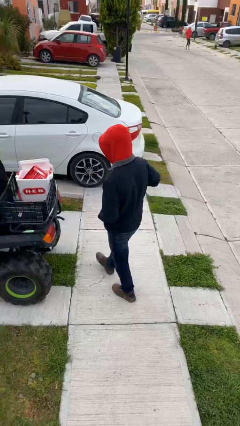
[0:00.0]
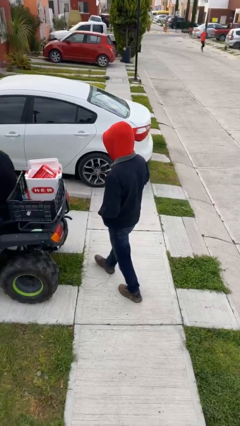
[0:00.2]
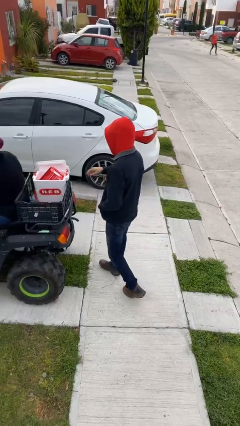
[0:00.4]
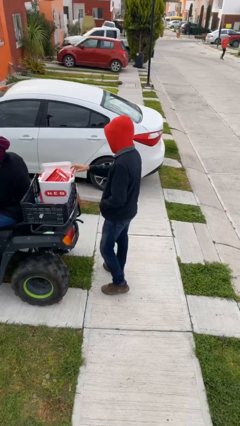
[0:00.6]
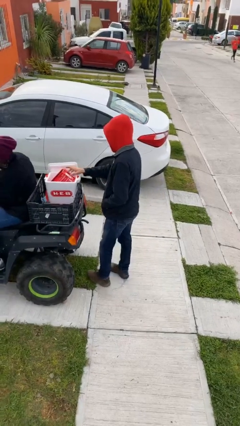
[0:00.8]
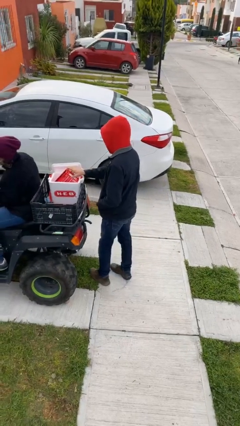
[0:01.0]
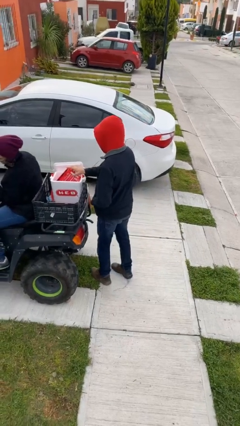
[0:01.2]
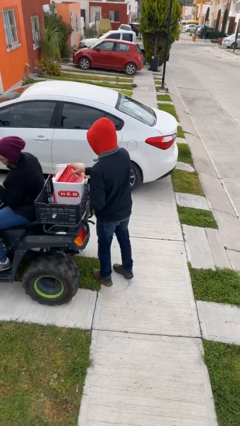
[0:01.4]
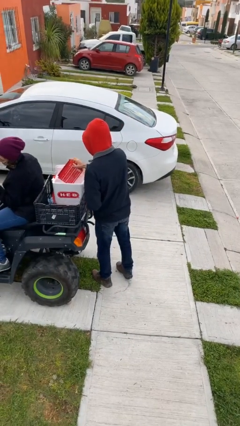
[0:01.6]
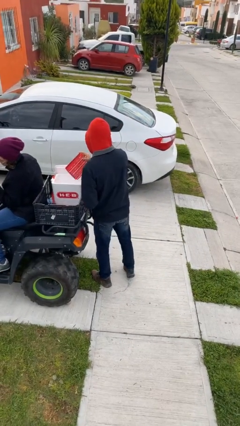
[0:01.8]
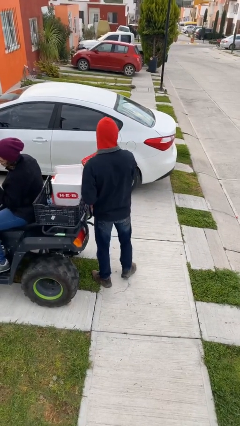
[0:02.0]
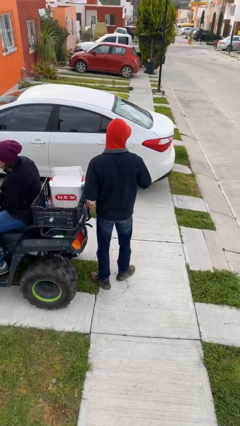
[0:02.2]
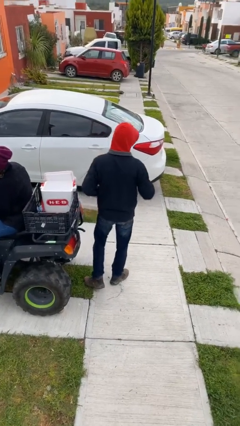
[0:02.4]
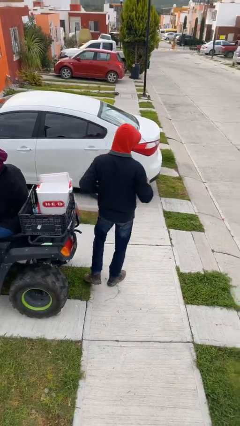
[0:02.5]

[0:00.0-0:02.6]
person steals object from person

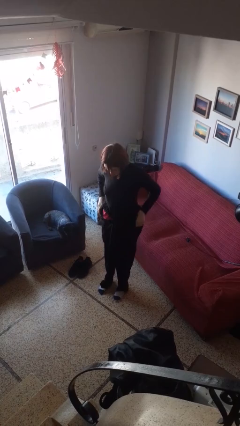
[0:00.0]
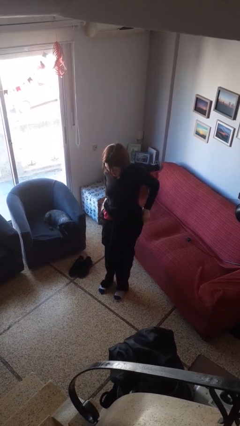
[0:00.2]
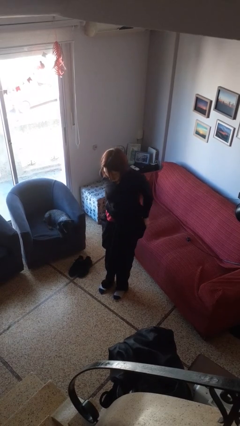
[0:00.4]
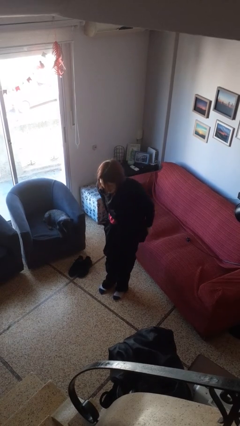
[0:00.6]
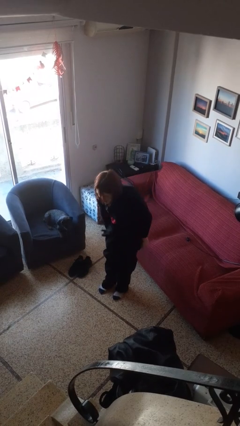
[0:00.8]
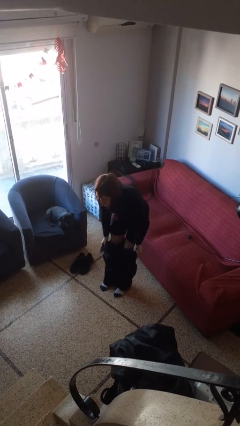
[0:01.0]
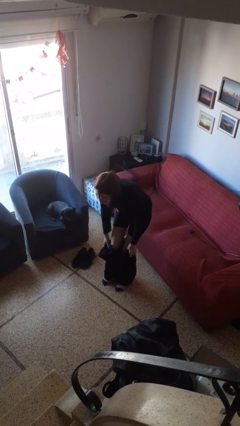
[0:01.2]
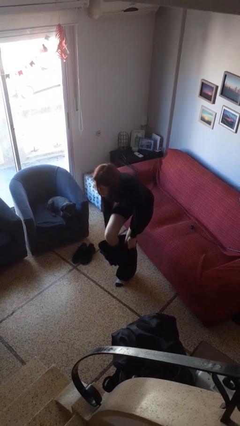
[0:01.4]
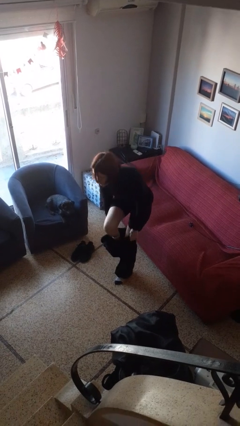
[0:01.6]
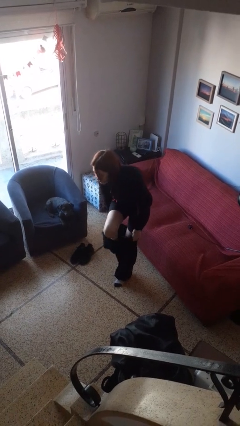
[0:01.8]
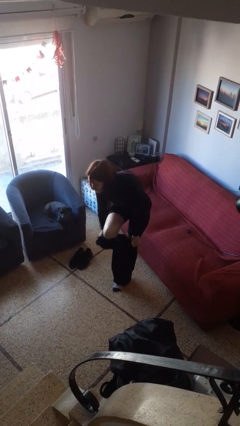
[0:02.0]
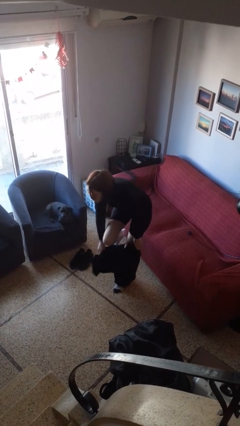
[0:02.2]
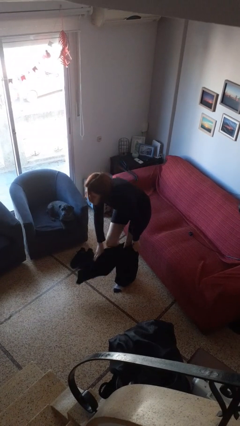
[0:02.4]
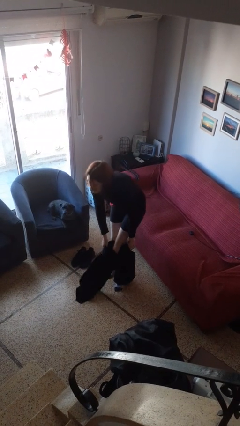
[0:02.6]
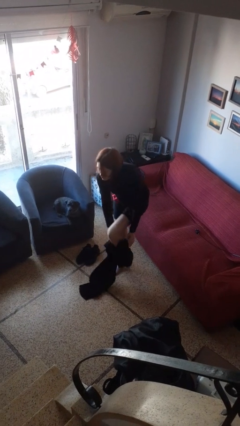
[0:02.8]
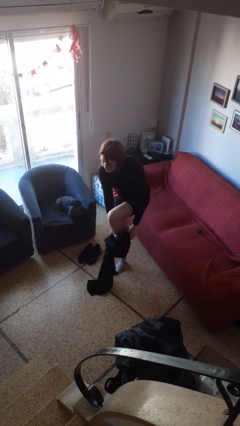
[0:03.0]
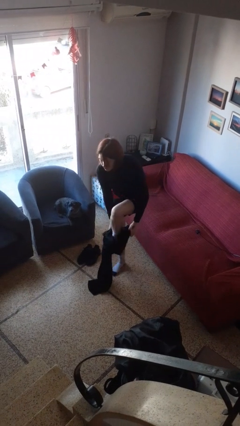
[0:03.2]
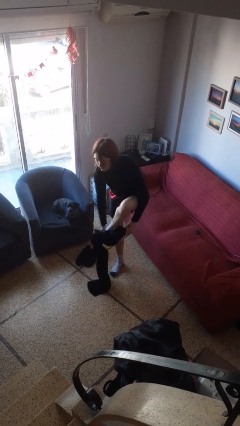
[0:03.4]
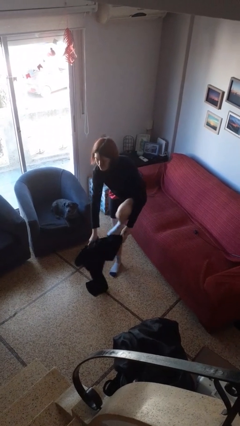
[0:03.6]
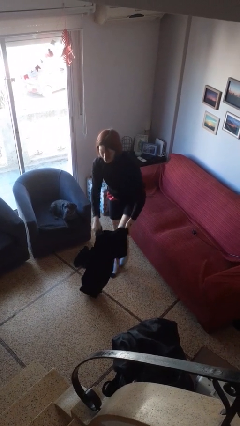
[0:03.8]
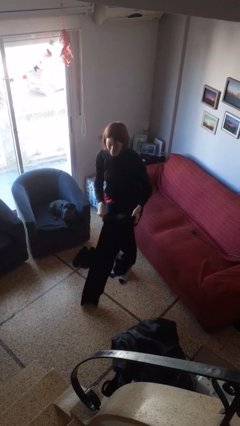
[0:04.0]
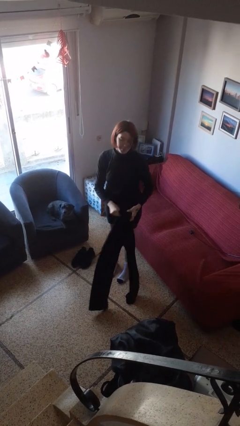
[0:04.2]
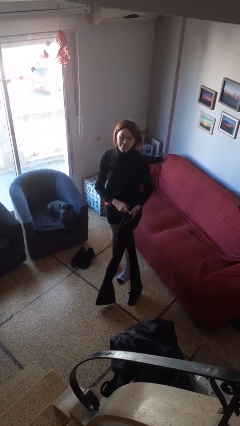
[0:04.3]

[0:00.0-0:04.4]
person takes off pants

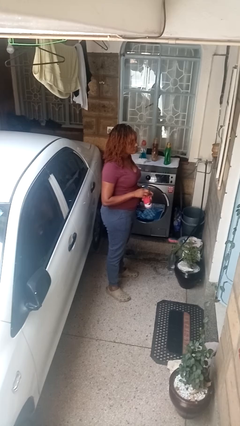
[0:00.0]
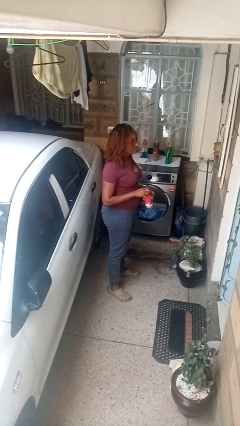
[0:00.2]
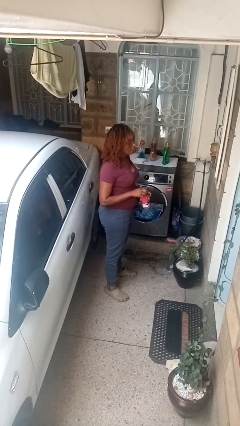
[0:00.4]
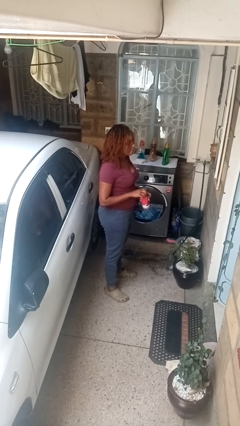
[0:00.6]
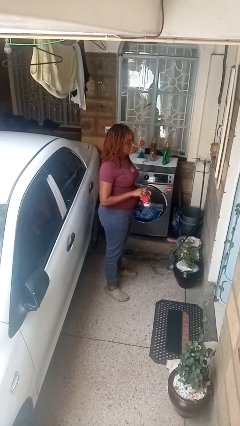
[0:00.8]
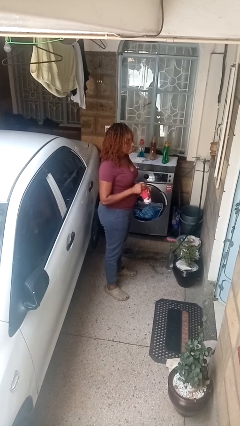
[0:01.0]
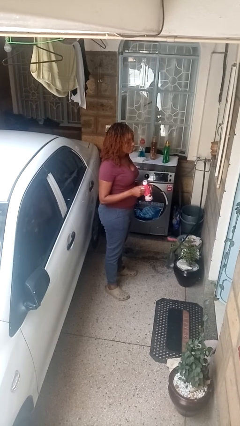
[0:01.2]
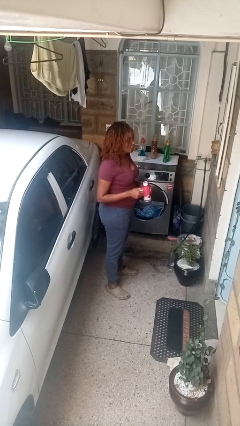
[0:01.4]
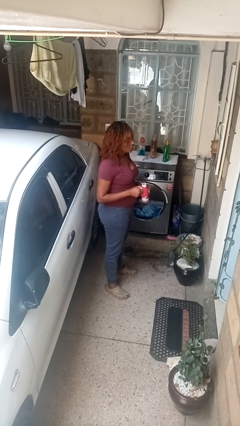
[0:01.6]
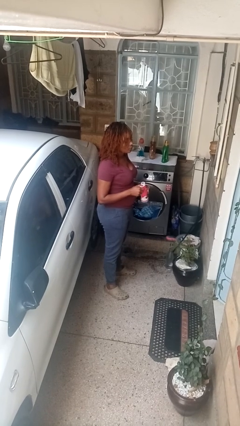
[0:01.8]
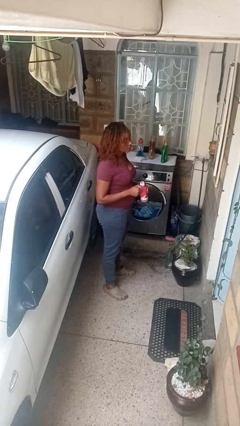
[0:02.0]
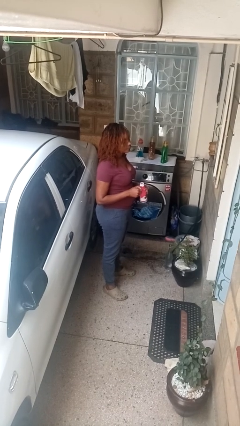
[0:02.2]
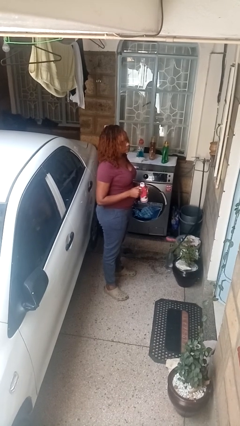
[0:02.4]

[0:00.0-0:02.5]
person opens beverage can

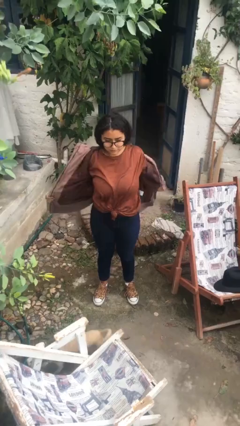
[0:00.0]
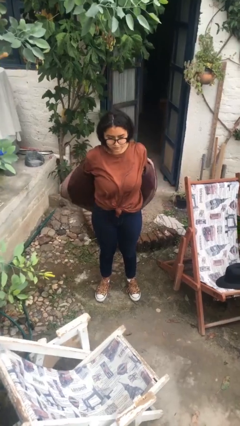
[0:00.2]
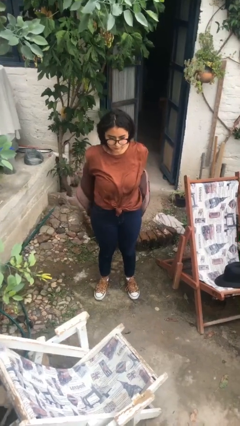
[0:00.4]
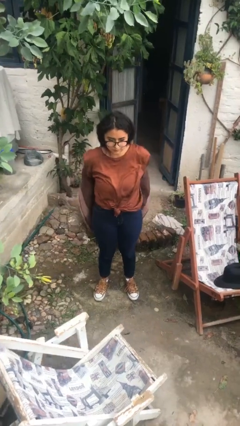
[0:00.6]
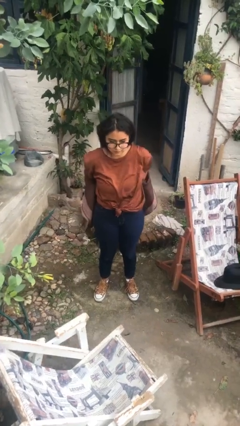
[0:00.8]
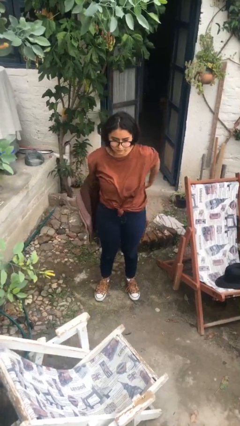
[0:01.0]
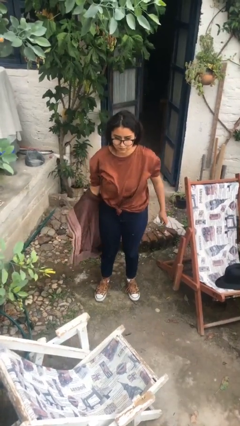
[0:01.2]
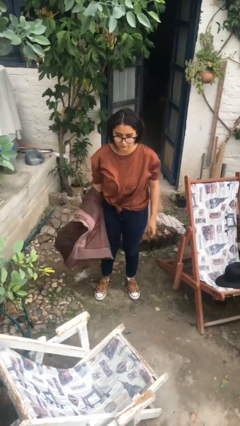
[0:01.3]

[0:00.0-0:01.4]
person takes off jacket

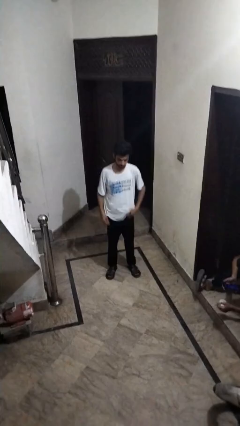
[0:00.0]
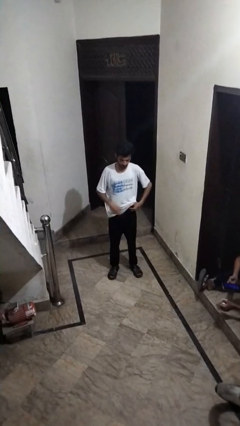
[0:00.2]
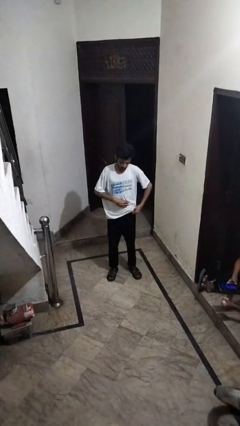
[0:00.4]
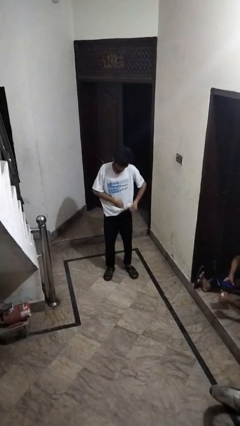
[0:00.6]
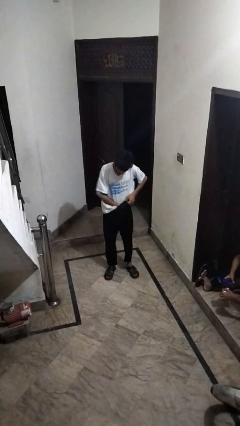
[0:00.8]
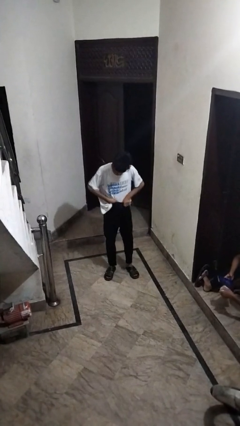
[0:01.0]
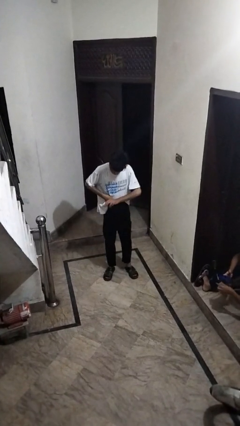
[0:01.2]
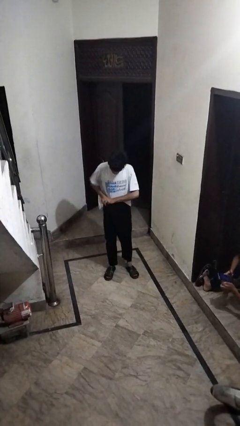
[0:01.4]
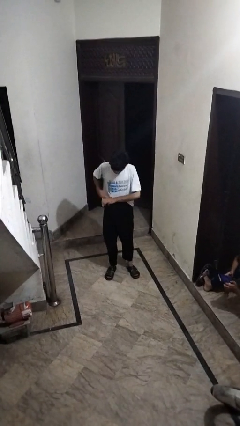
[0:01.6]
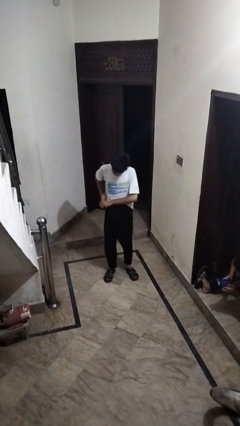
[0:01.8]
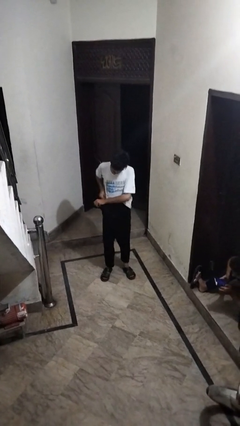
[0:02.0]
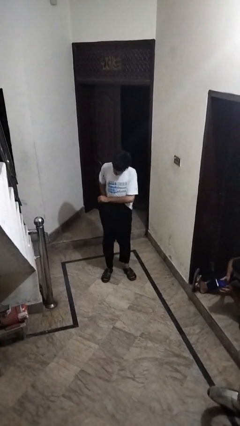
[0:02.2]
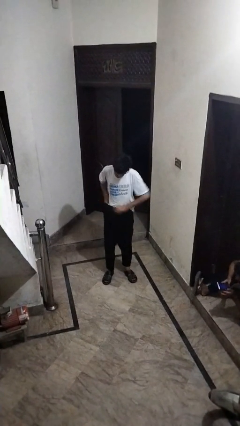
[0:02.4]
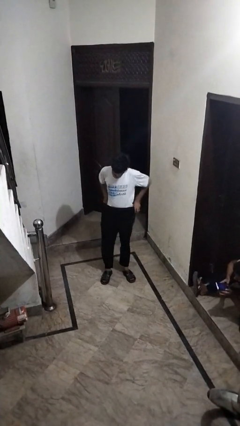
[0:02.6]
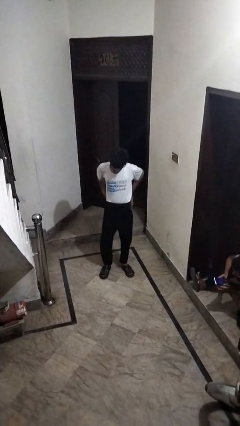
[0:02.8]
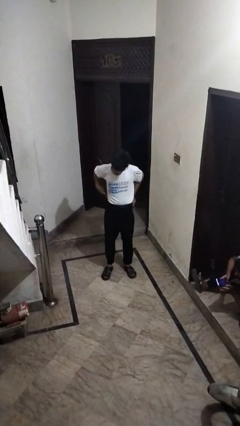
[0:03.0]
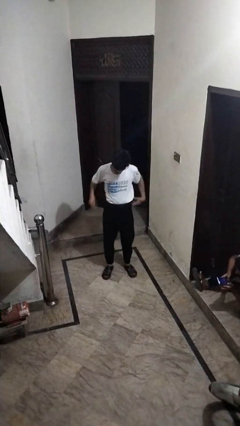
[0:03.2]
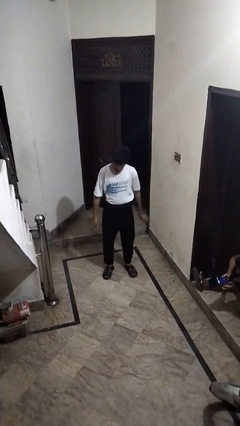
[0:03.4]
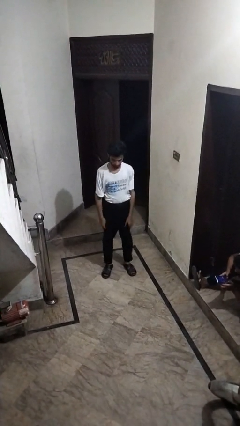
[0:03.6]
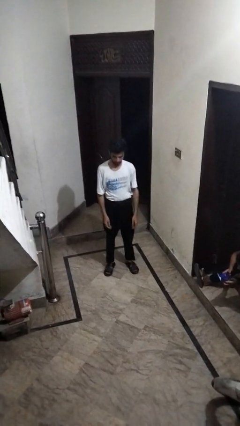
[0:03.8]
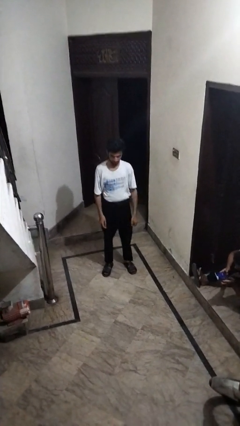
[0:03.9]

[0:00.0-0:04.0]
person tucks in shirt

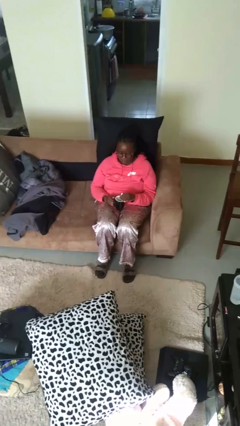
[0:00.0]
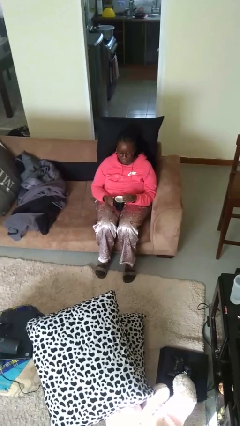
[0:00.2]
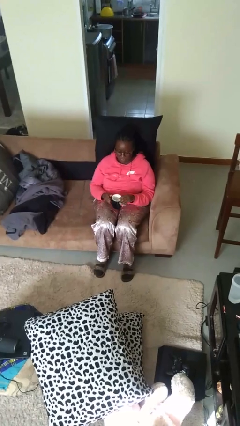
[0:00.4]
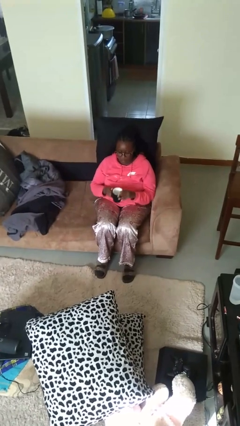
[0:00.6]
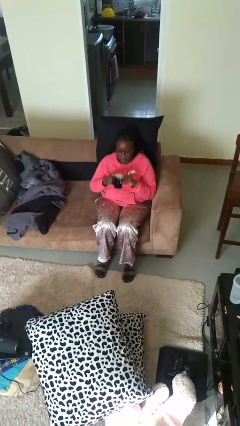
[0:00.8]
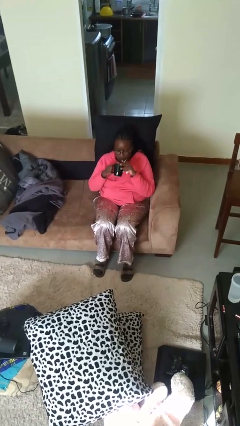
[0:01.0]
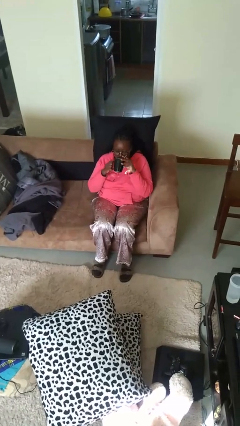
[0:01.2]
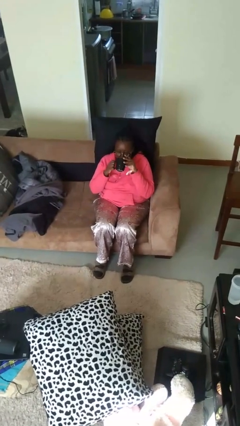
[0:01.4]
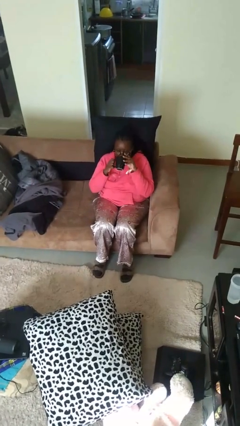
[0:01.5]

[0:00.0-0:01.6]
person drinks from mug

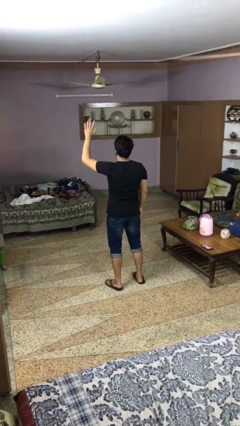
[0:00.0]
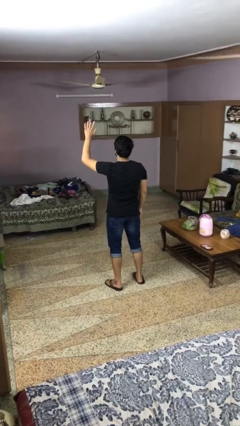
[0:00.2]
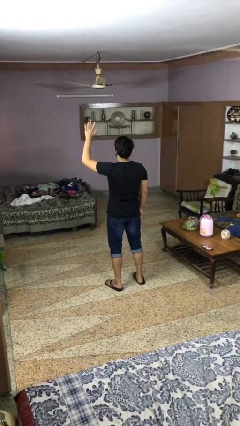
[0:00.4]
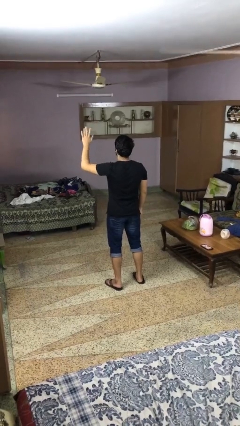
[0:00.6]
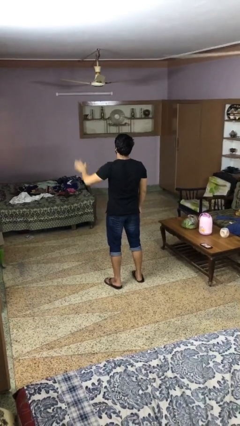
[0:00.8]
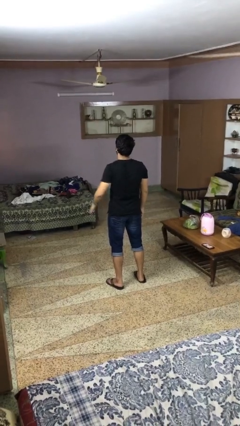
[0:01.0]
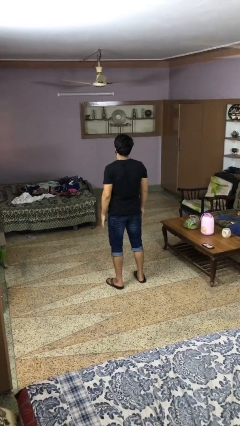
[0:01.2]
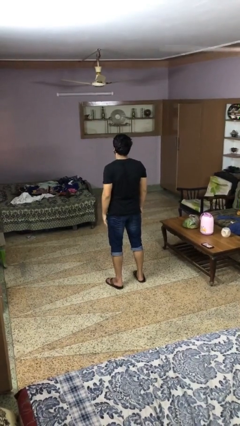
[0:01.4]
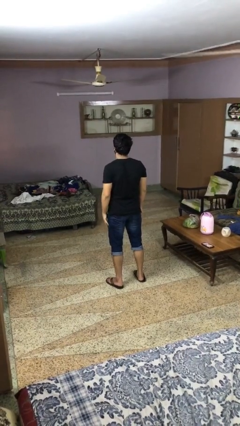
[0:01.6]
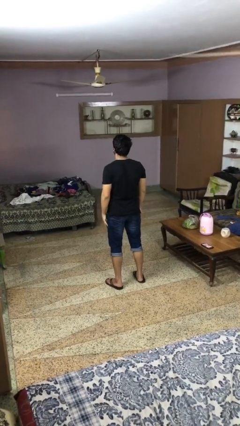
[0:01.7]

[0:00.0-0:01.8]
person gestures lower hand
